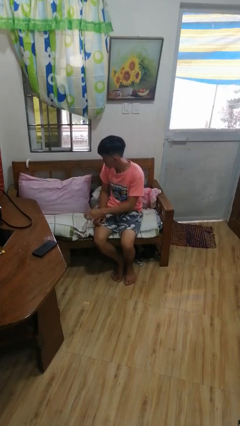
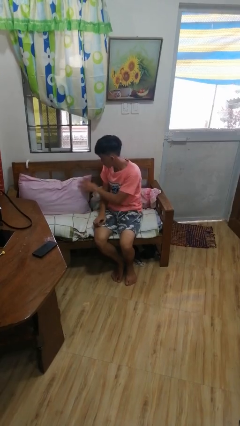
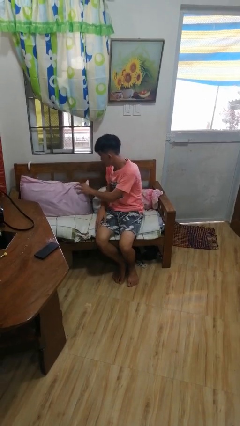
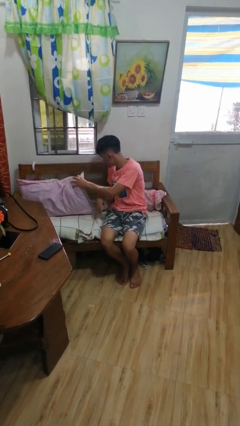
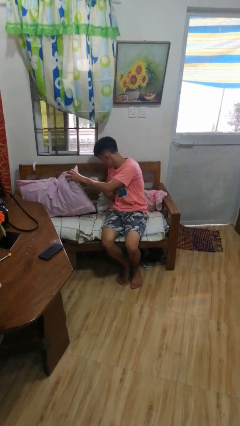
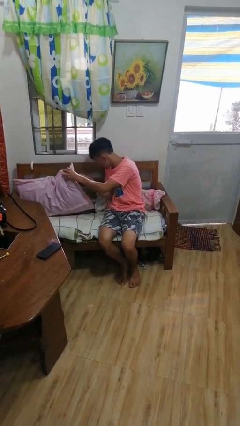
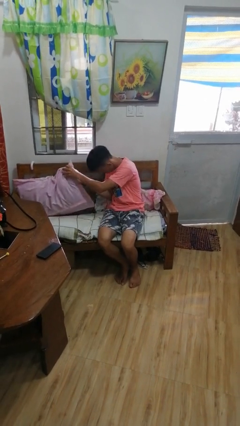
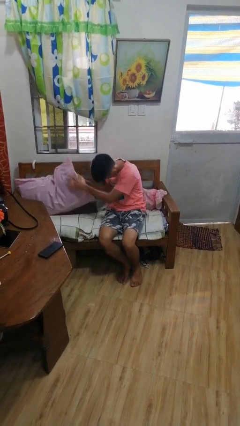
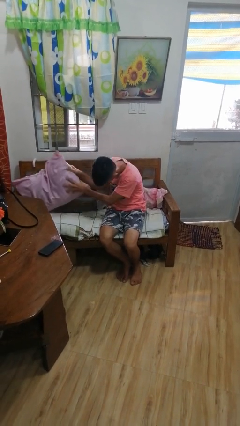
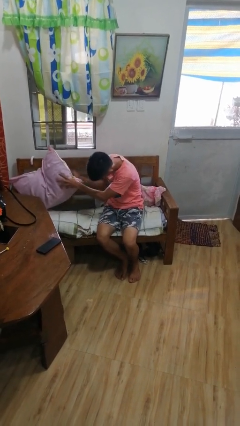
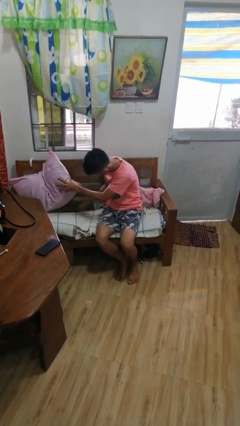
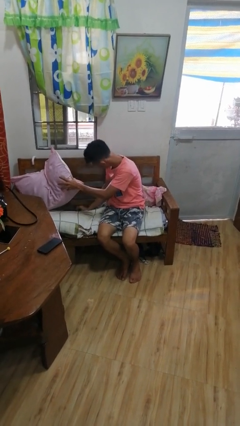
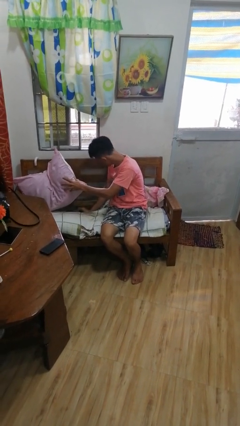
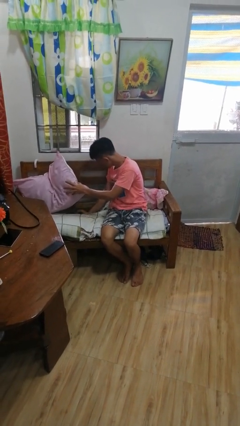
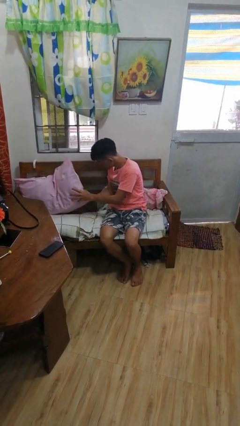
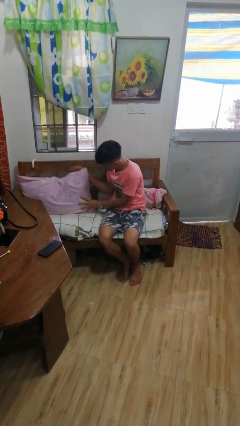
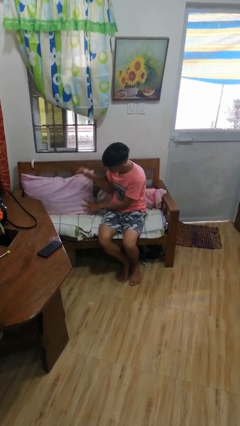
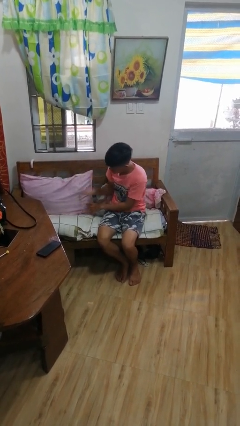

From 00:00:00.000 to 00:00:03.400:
person searches in couch

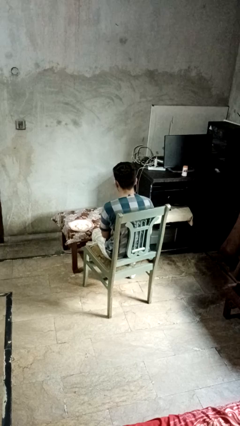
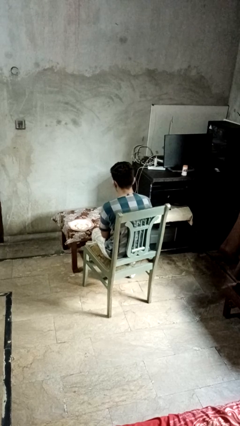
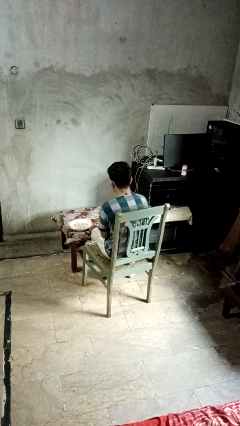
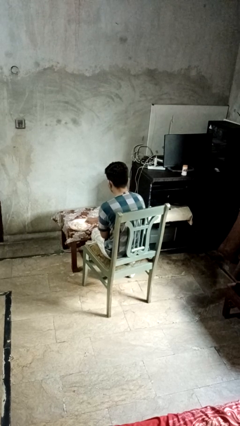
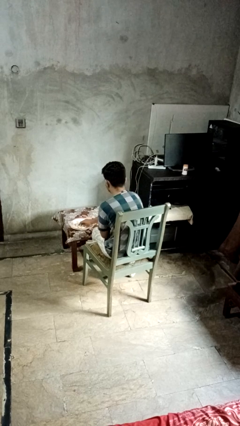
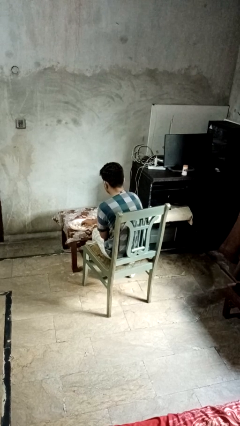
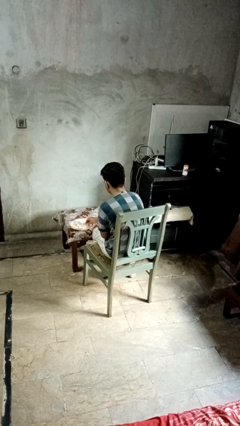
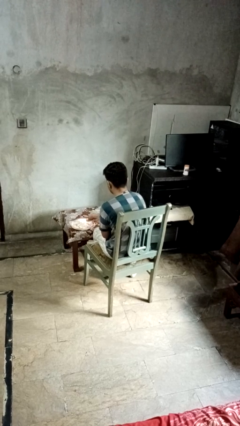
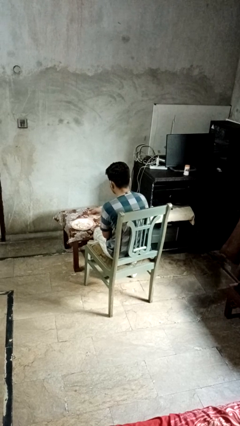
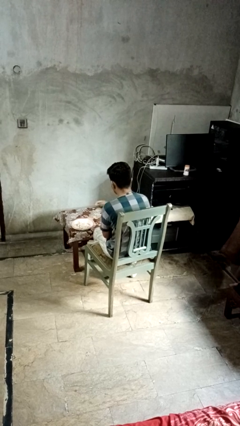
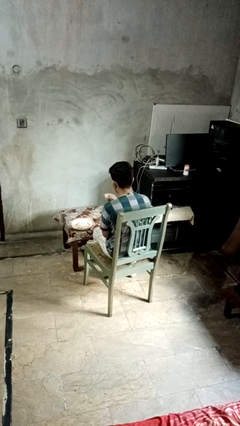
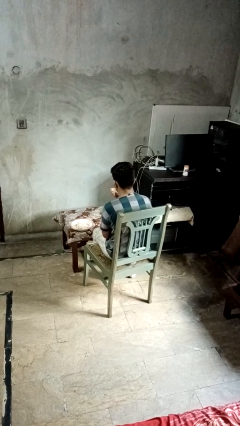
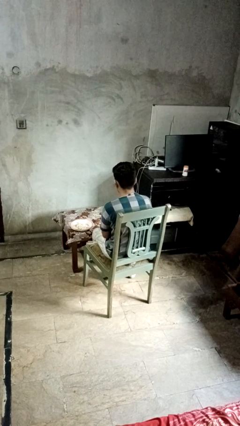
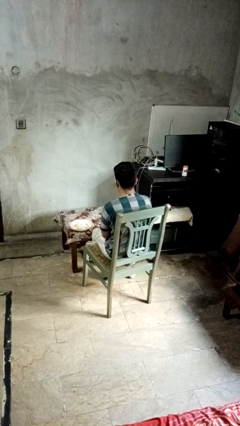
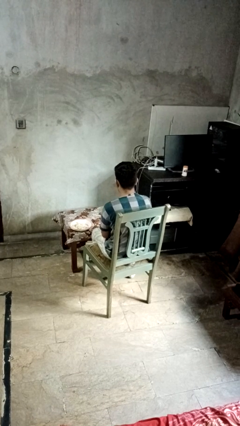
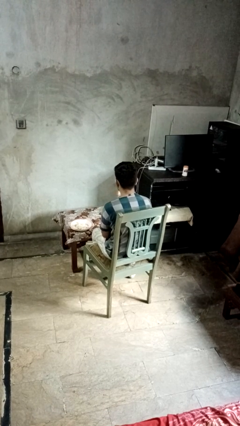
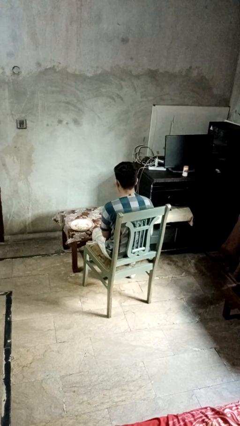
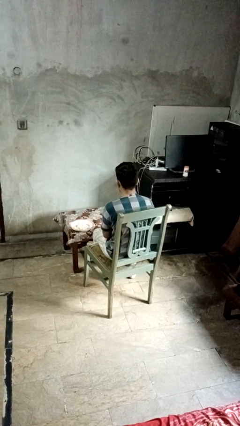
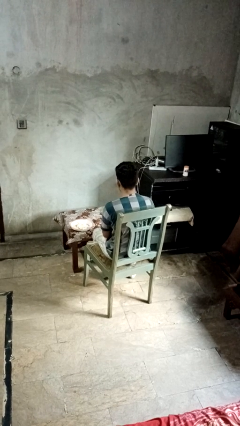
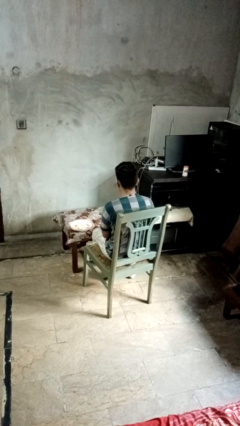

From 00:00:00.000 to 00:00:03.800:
person eats with hands

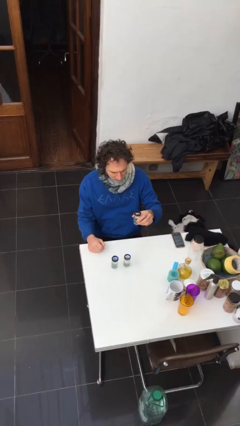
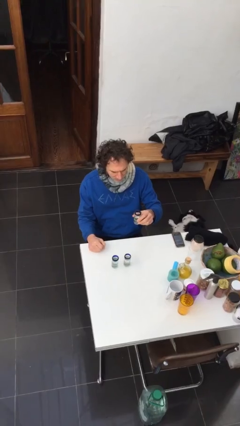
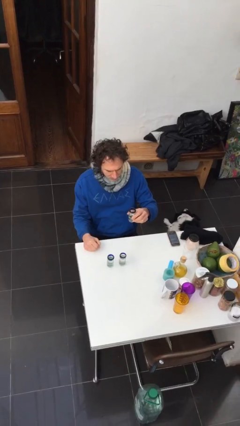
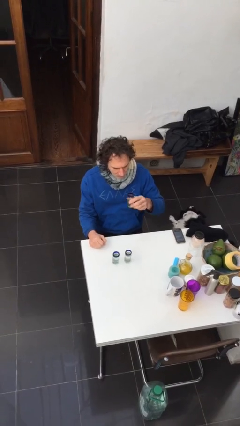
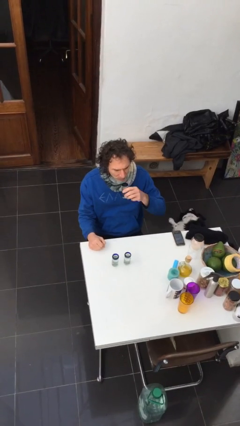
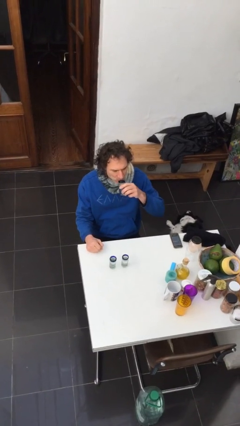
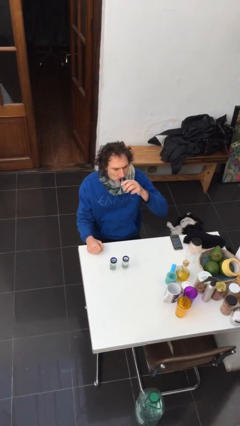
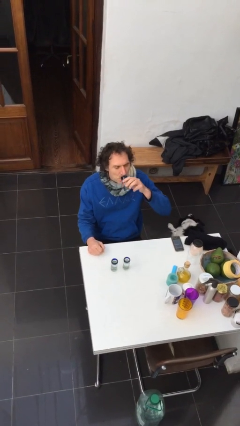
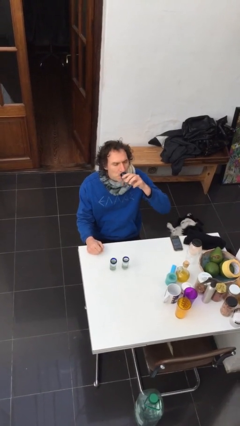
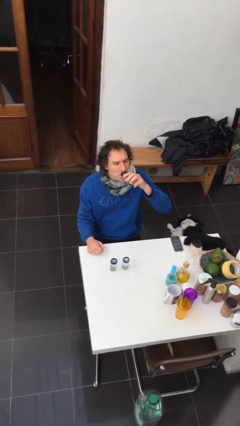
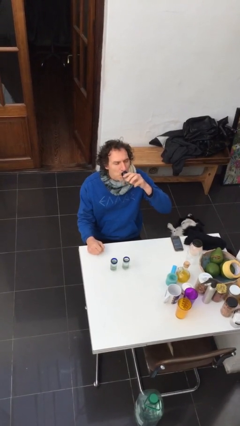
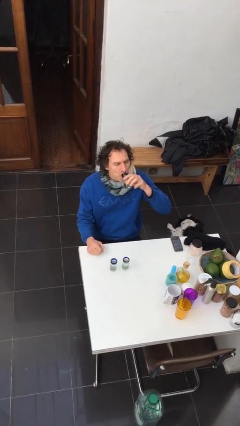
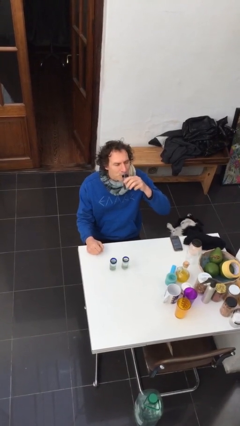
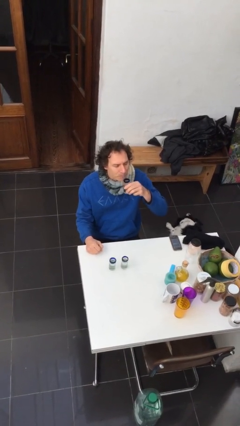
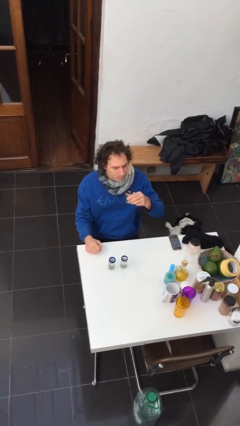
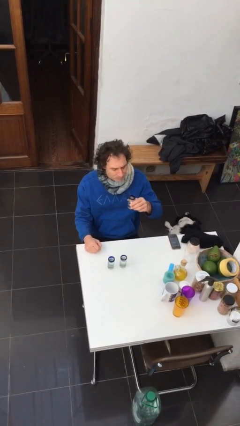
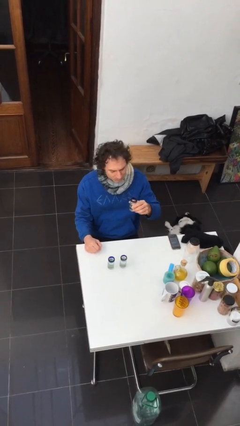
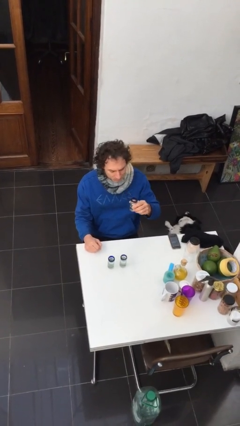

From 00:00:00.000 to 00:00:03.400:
person drinks from shotglass

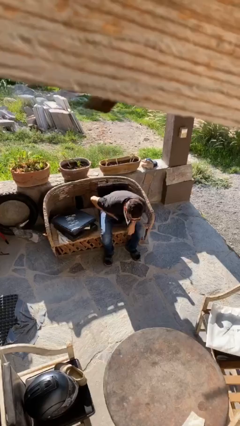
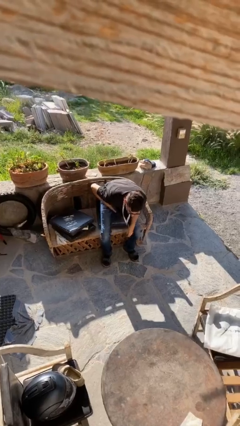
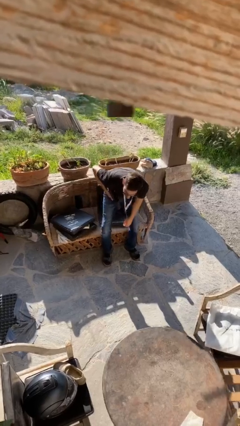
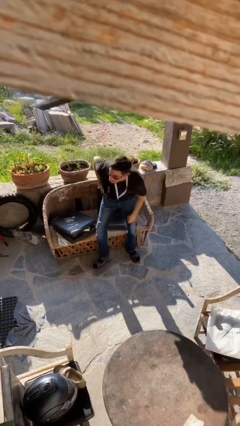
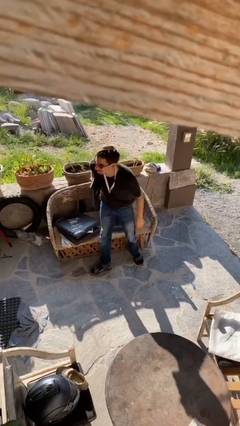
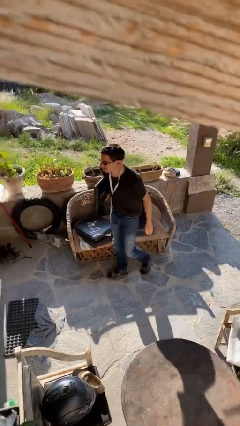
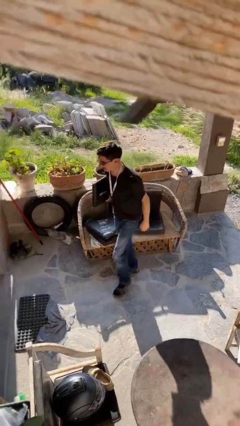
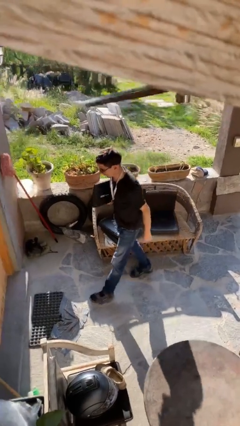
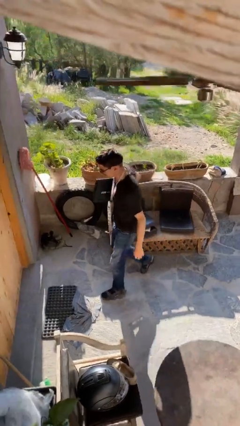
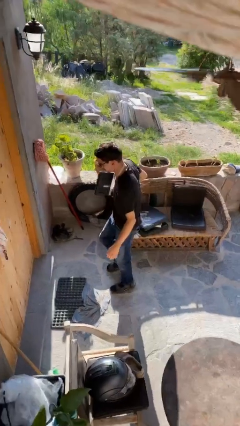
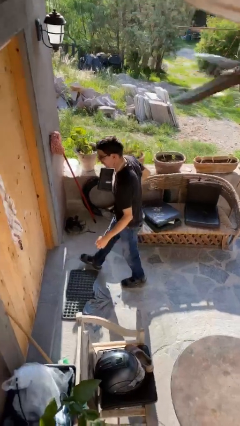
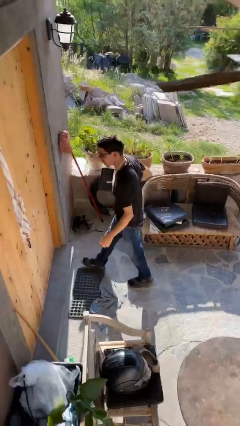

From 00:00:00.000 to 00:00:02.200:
person stands up

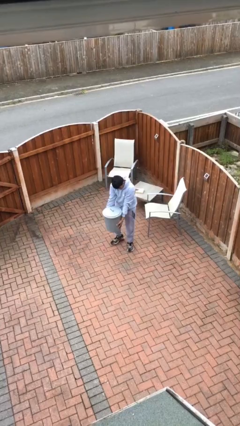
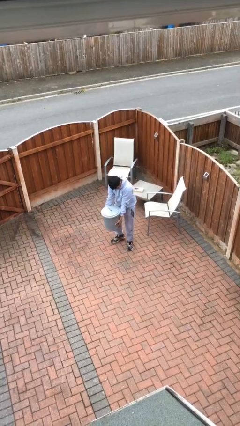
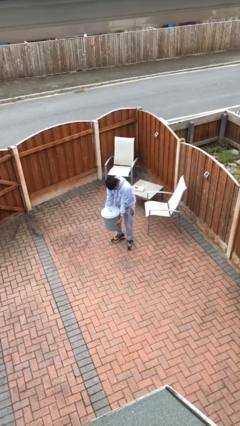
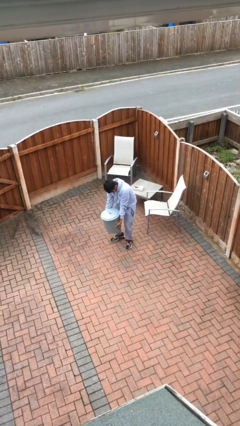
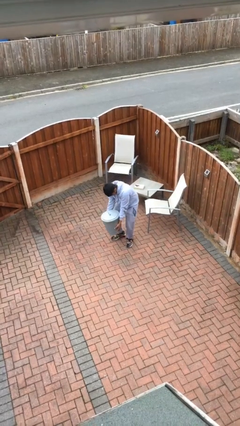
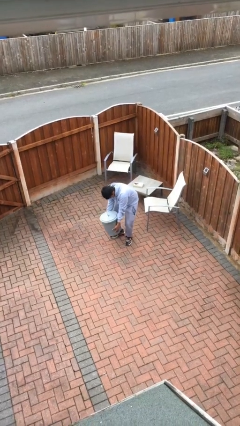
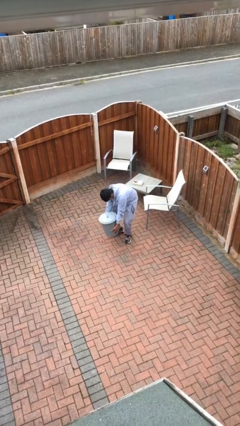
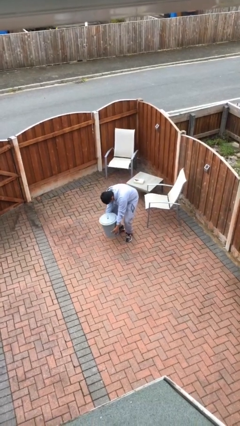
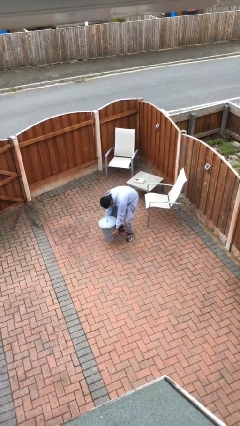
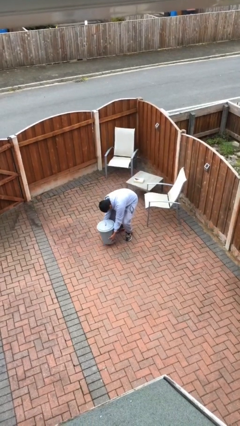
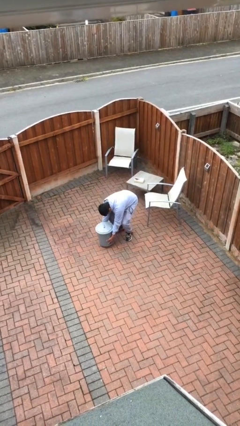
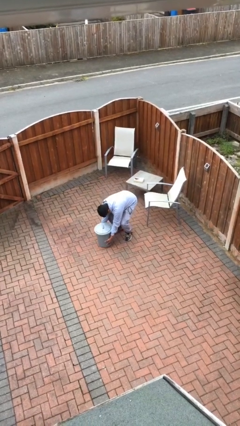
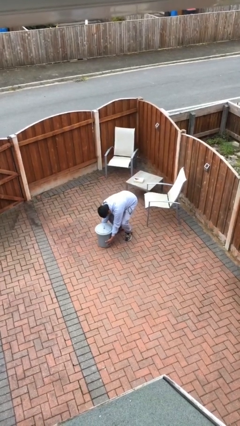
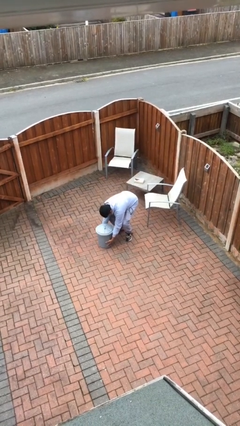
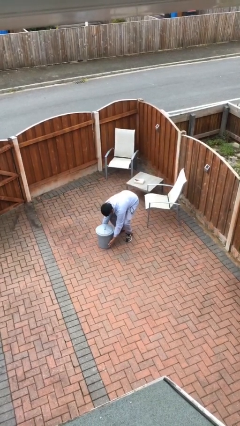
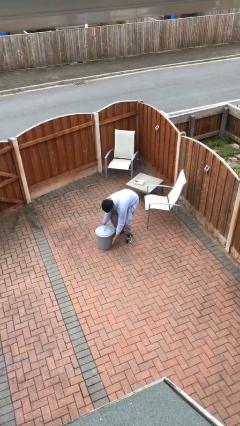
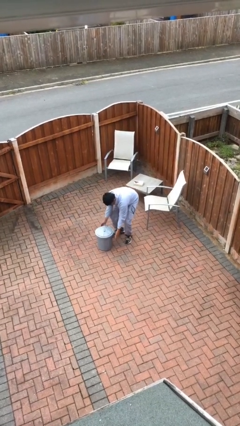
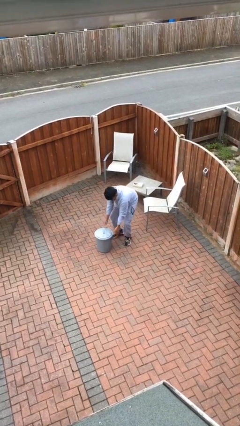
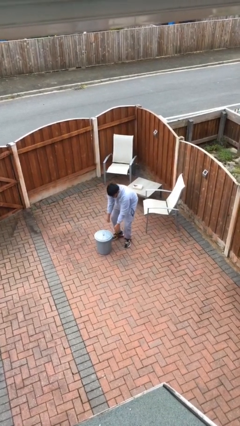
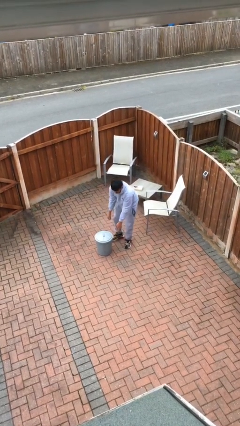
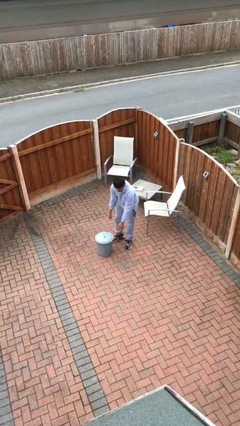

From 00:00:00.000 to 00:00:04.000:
person puts down object on floor

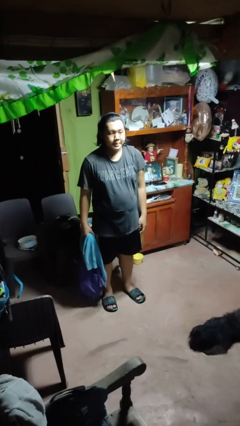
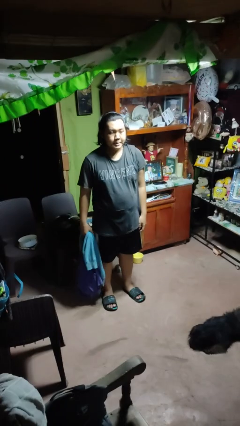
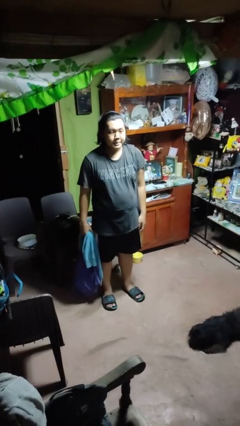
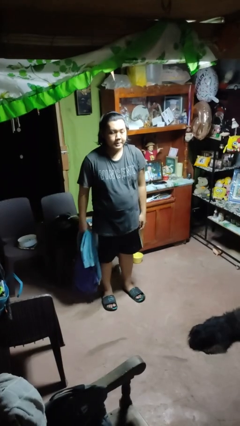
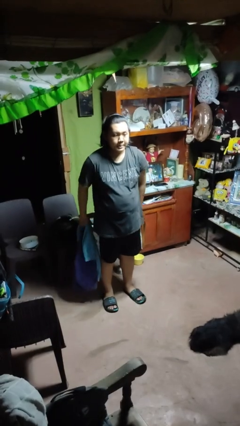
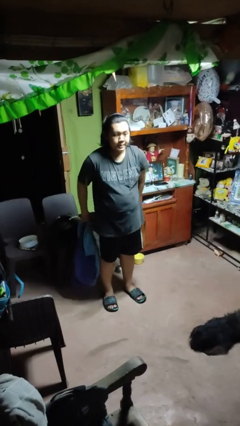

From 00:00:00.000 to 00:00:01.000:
person unties jacket around waist
